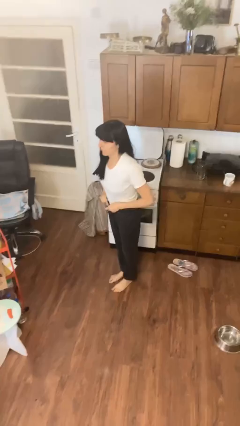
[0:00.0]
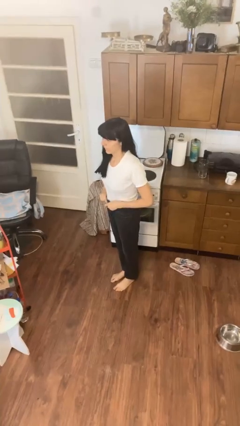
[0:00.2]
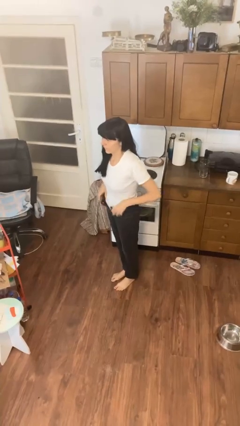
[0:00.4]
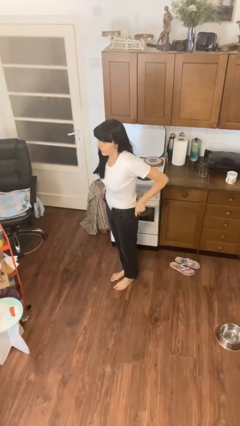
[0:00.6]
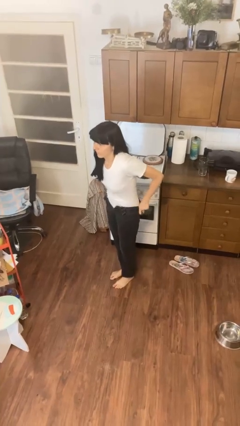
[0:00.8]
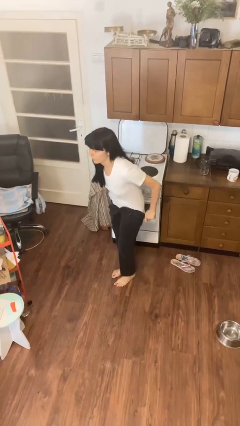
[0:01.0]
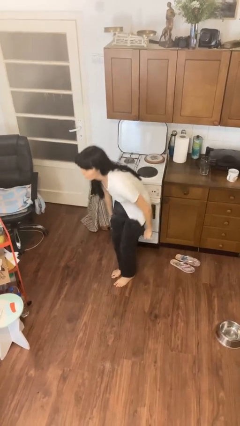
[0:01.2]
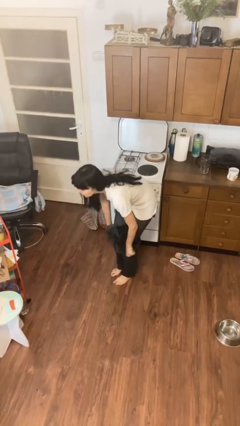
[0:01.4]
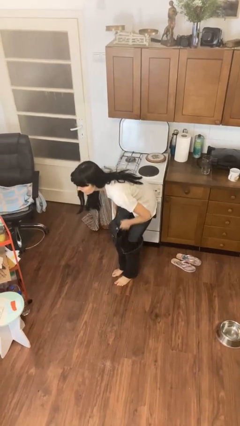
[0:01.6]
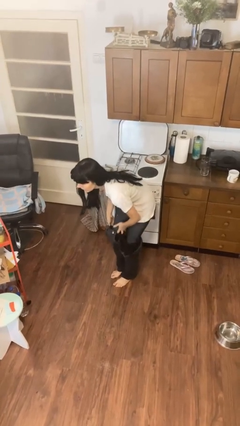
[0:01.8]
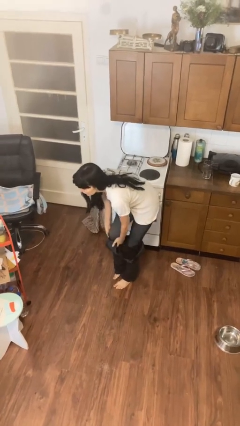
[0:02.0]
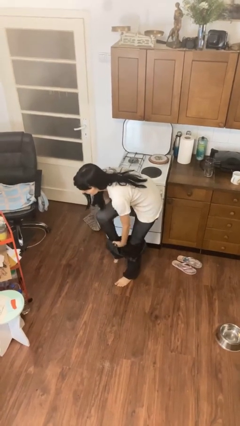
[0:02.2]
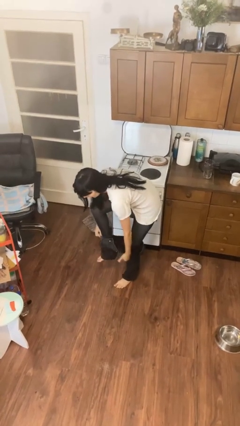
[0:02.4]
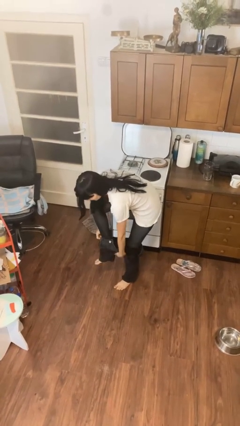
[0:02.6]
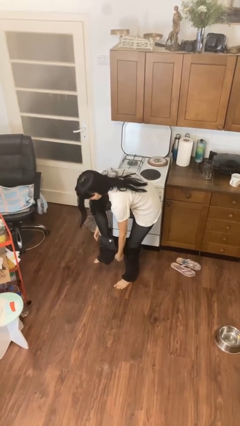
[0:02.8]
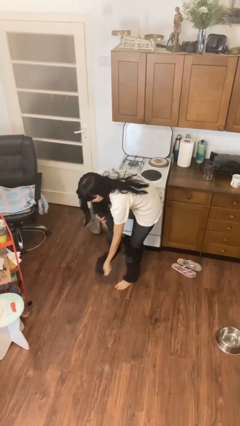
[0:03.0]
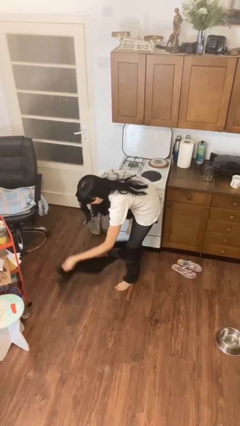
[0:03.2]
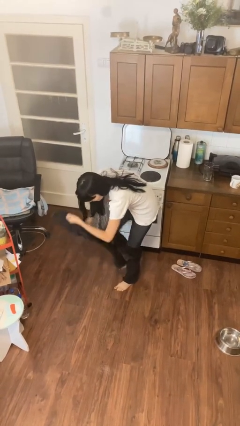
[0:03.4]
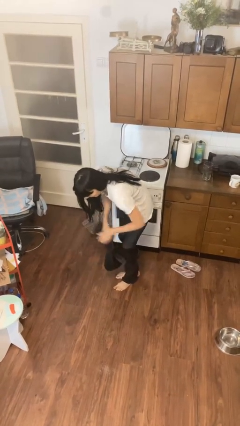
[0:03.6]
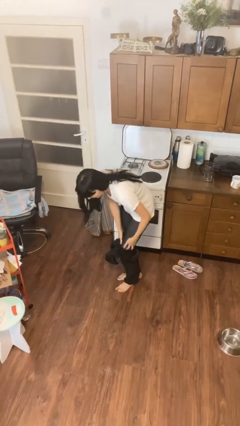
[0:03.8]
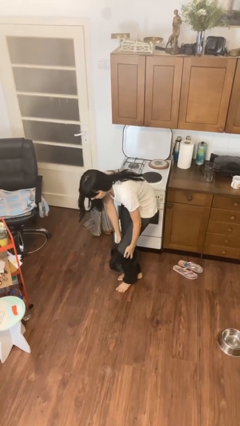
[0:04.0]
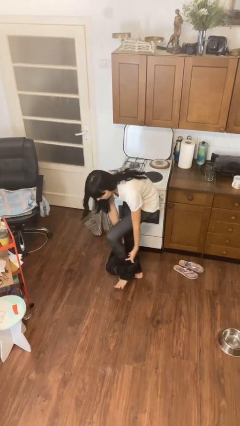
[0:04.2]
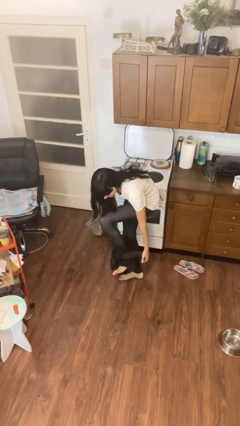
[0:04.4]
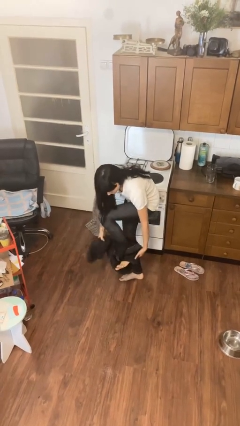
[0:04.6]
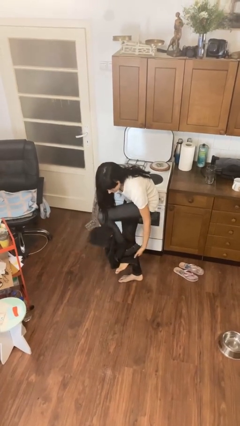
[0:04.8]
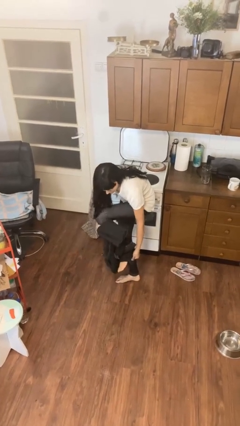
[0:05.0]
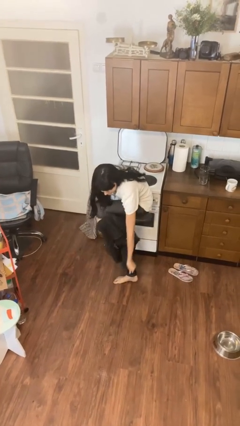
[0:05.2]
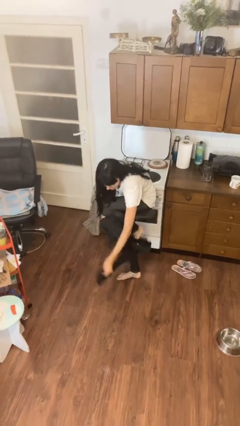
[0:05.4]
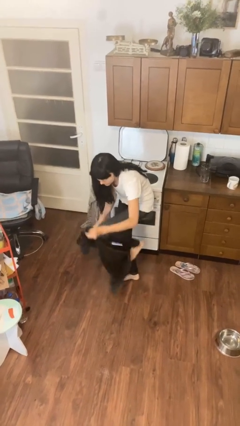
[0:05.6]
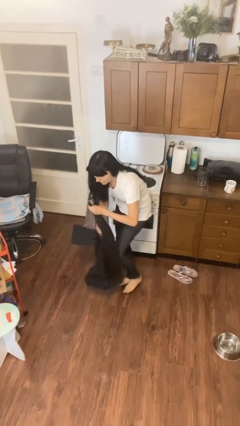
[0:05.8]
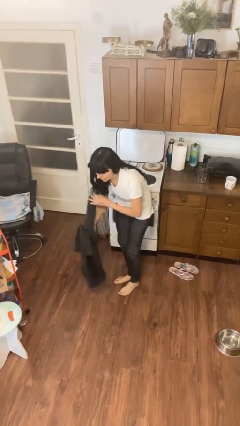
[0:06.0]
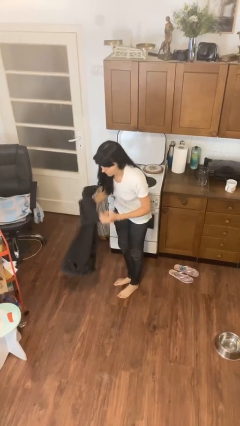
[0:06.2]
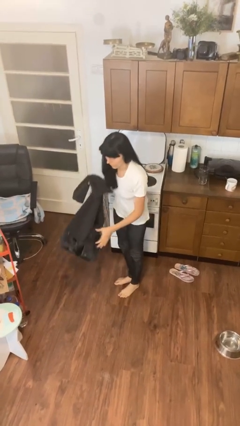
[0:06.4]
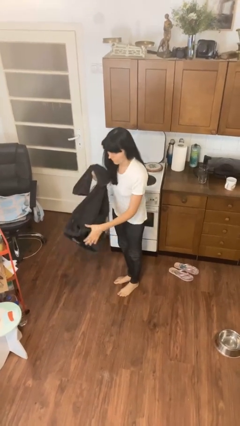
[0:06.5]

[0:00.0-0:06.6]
person takes off pants

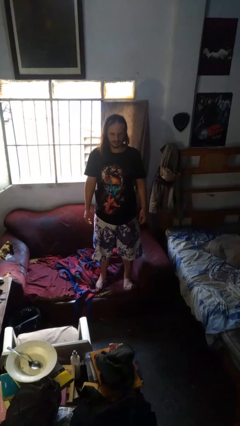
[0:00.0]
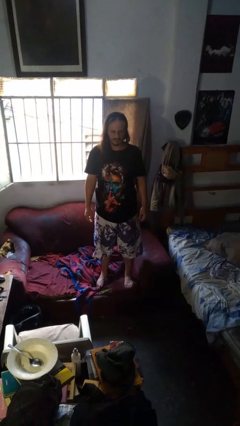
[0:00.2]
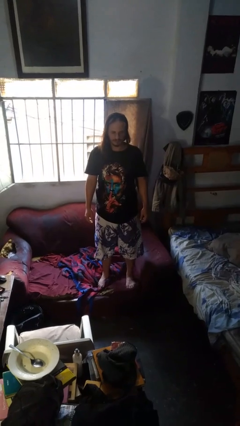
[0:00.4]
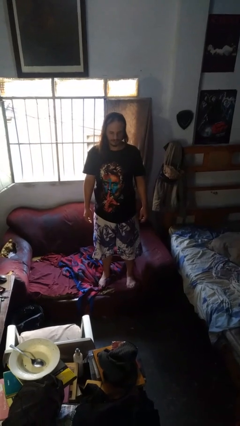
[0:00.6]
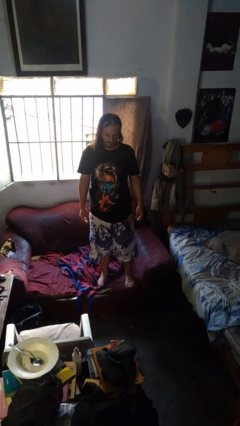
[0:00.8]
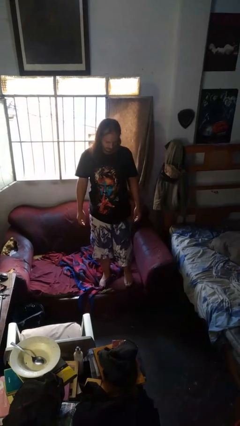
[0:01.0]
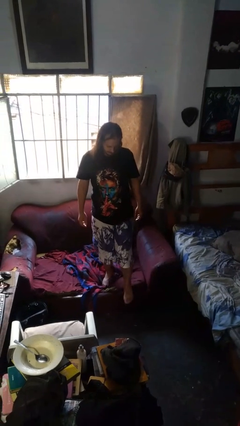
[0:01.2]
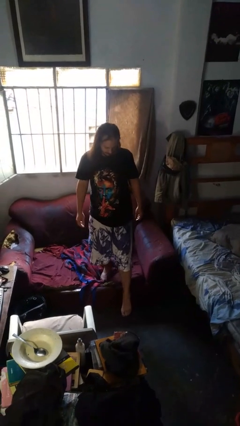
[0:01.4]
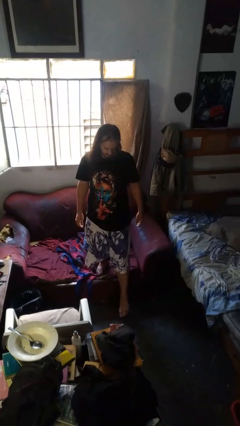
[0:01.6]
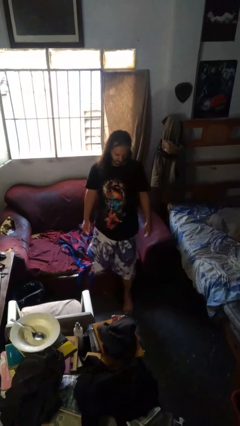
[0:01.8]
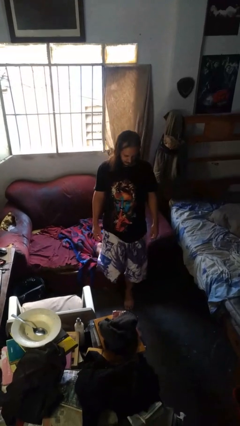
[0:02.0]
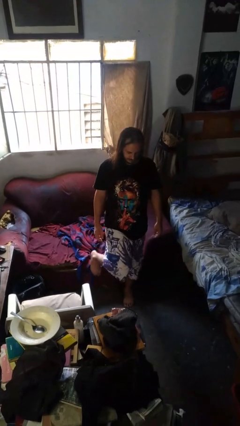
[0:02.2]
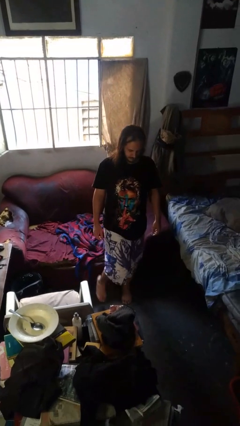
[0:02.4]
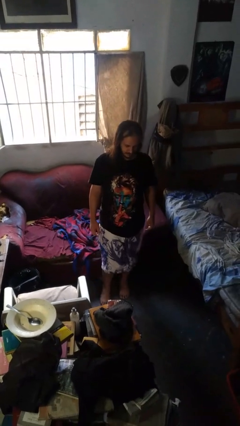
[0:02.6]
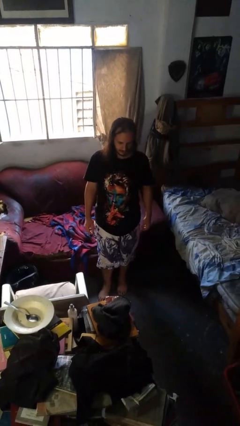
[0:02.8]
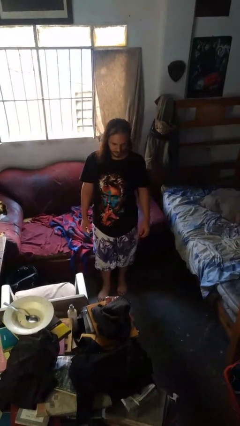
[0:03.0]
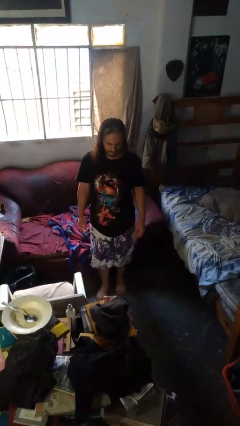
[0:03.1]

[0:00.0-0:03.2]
person climbs off couch

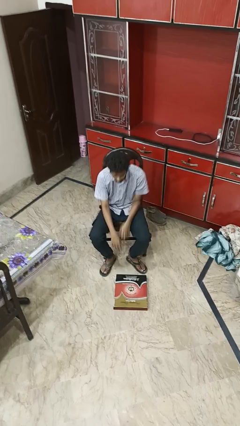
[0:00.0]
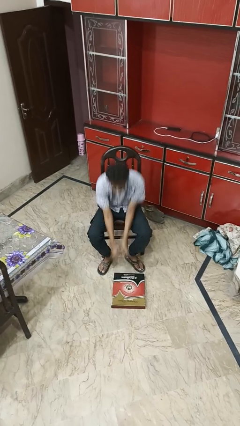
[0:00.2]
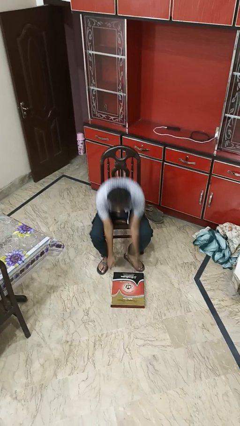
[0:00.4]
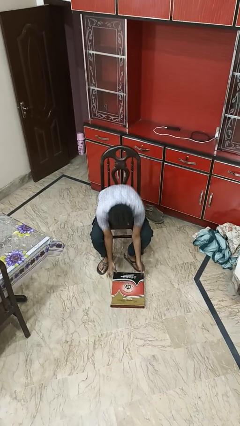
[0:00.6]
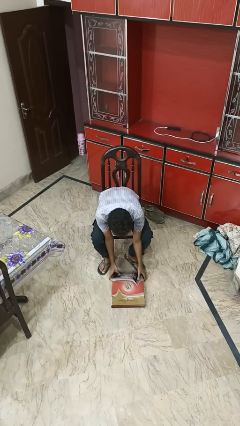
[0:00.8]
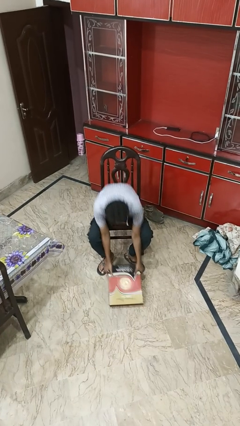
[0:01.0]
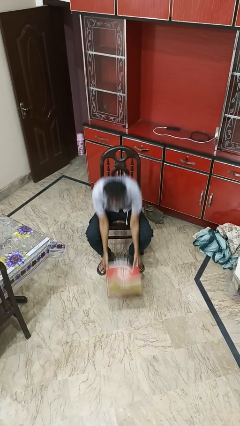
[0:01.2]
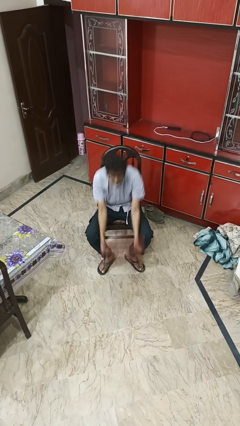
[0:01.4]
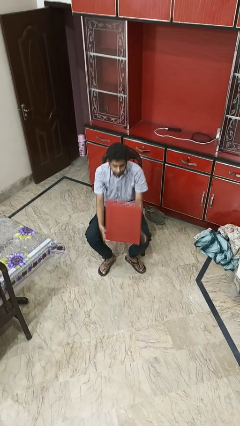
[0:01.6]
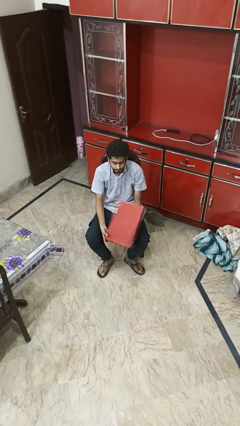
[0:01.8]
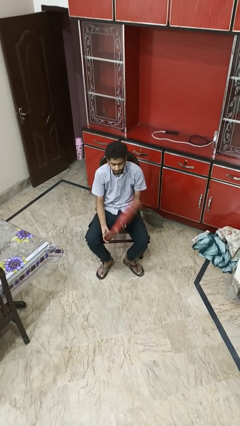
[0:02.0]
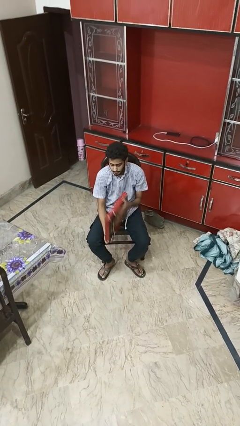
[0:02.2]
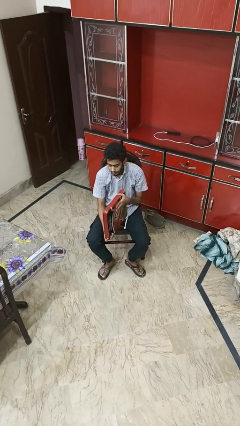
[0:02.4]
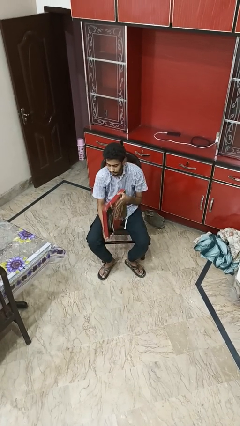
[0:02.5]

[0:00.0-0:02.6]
person picks up object from floor

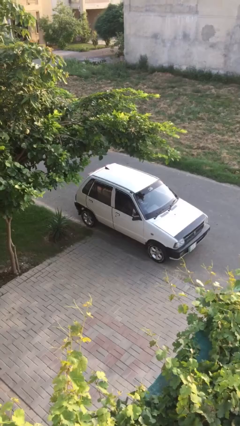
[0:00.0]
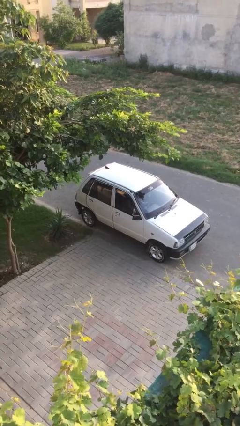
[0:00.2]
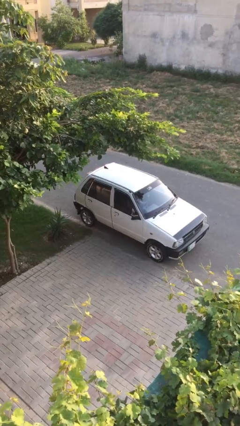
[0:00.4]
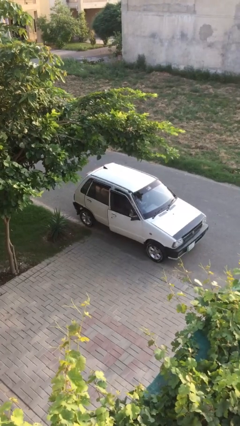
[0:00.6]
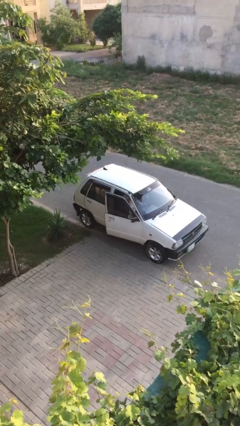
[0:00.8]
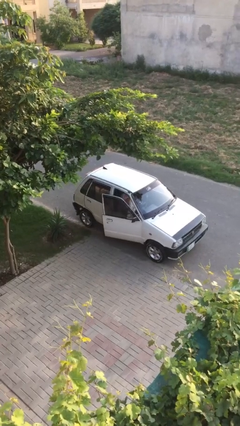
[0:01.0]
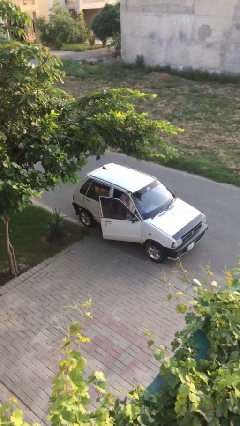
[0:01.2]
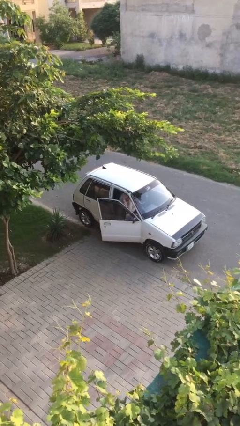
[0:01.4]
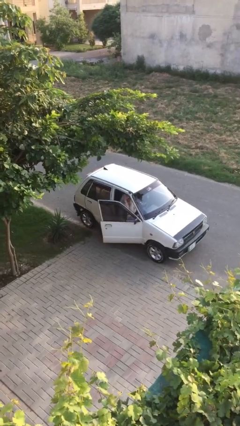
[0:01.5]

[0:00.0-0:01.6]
person opens car door

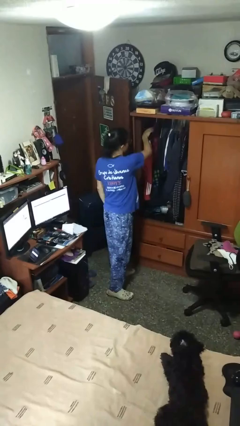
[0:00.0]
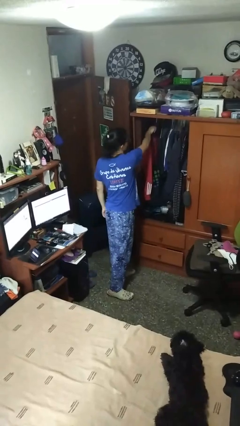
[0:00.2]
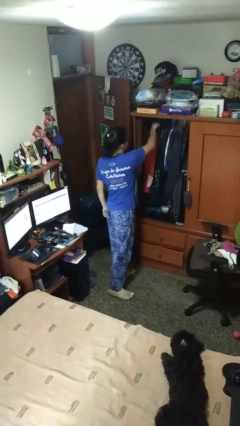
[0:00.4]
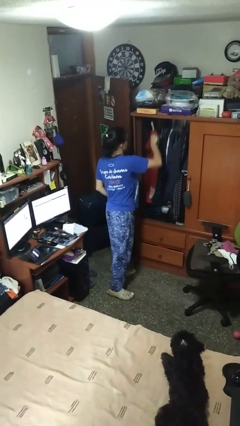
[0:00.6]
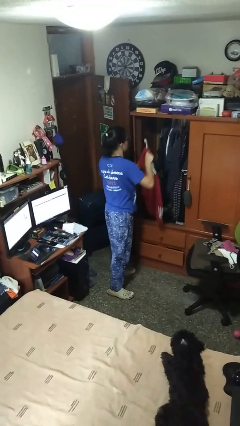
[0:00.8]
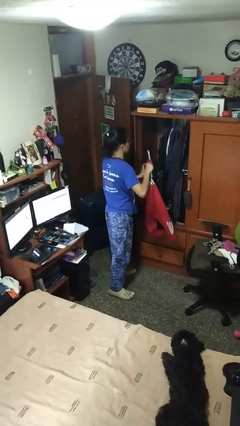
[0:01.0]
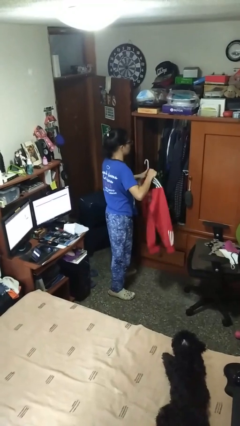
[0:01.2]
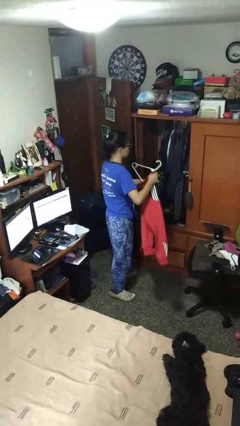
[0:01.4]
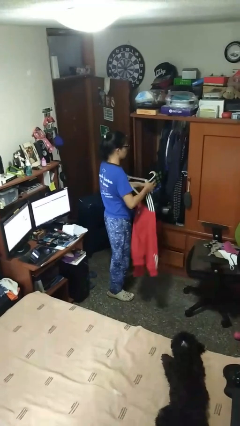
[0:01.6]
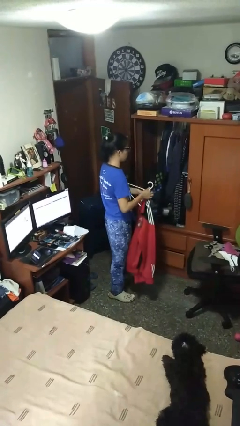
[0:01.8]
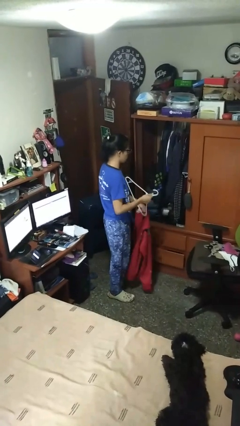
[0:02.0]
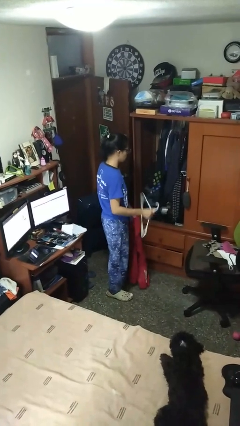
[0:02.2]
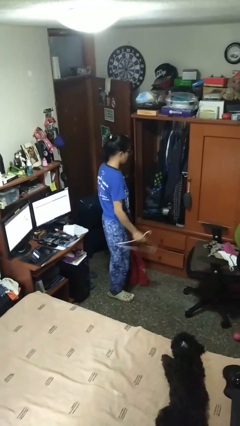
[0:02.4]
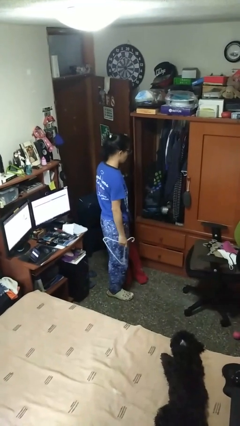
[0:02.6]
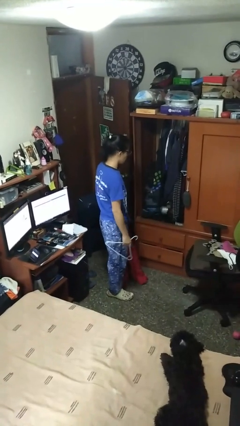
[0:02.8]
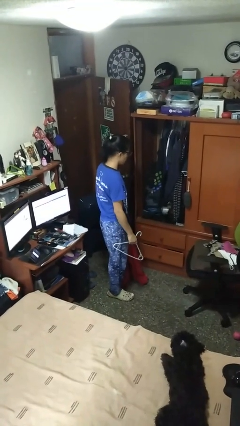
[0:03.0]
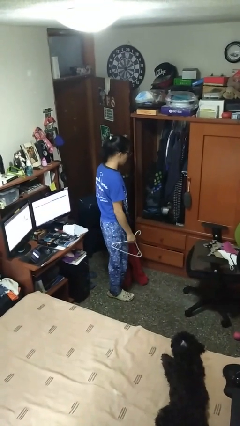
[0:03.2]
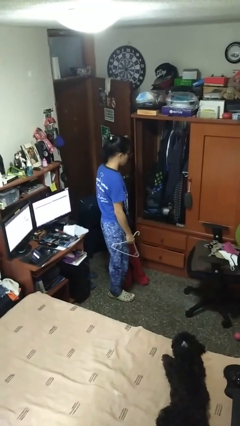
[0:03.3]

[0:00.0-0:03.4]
person takes clothes from closet

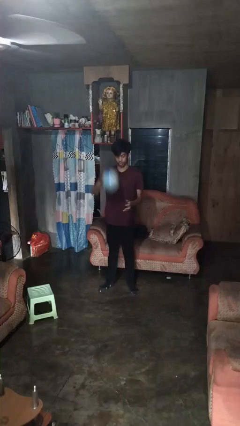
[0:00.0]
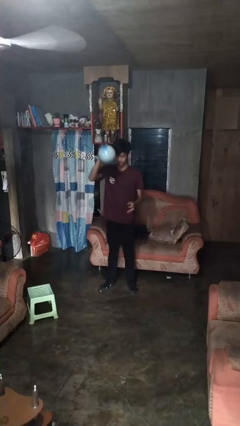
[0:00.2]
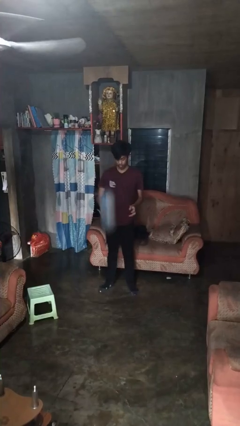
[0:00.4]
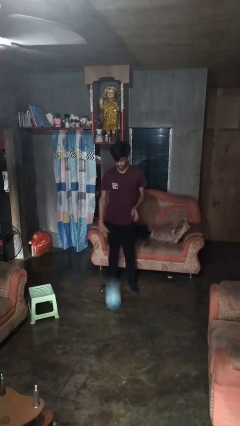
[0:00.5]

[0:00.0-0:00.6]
person bounces ball on floor
